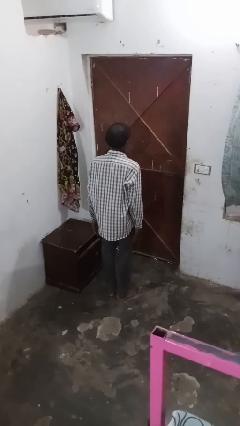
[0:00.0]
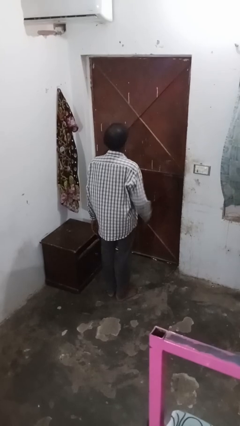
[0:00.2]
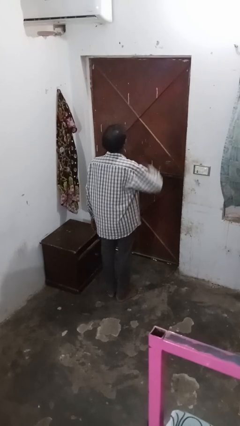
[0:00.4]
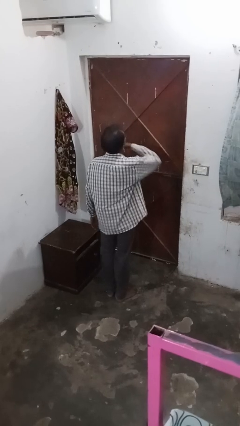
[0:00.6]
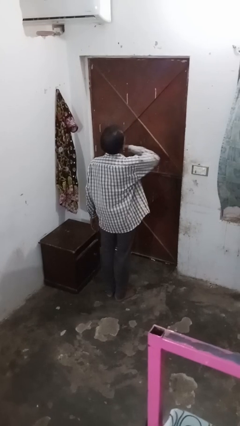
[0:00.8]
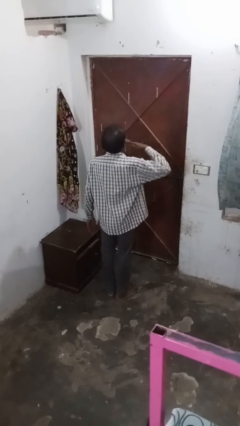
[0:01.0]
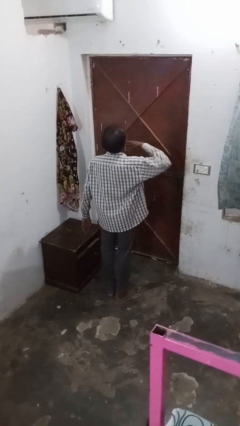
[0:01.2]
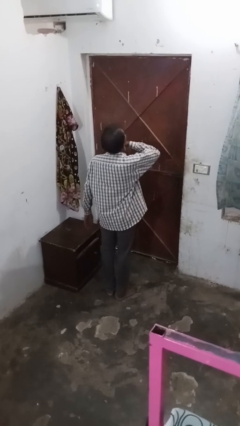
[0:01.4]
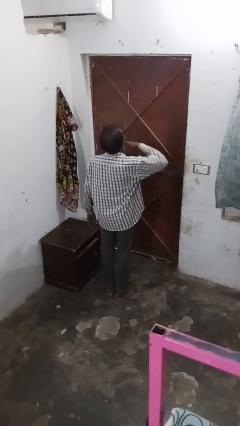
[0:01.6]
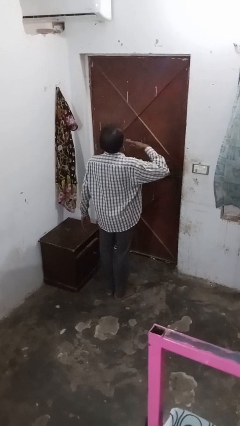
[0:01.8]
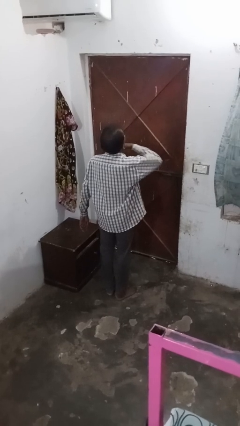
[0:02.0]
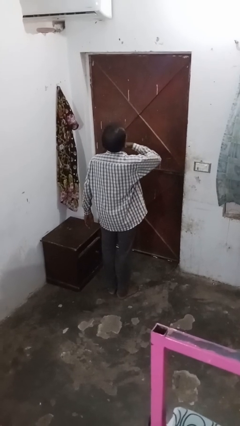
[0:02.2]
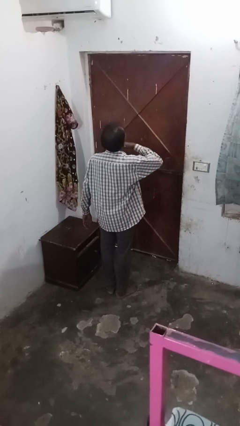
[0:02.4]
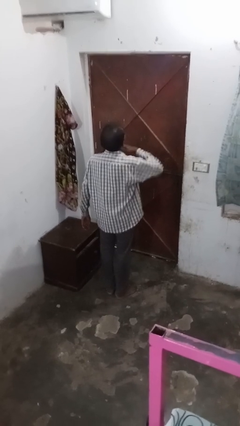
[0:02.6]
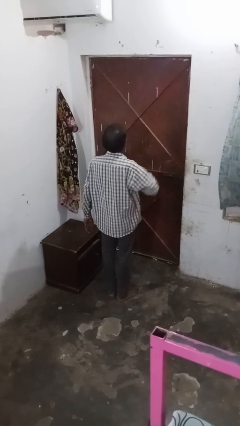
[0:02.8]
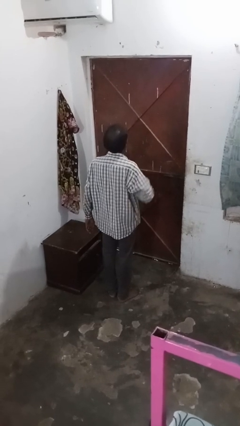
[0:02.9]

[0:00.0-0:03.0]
person gestures cut

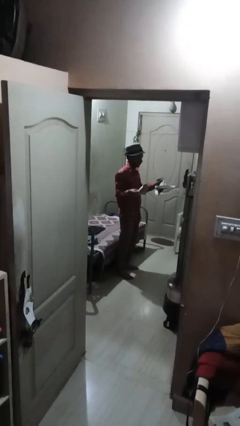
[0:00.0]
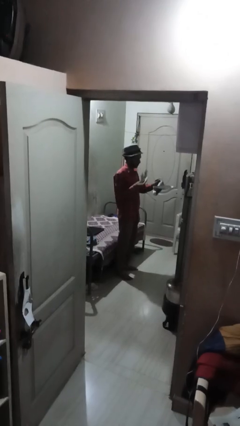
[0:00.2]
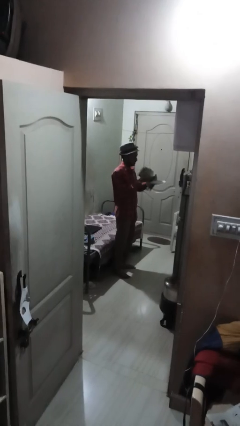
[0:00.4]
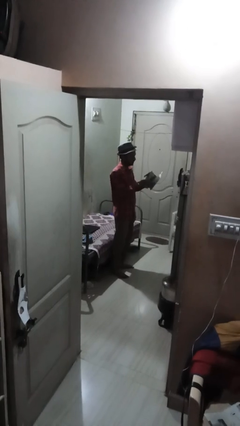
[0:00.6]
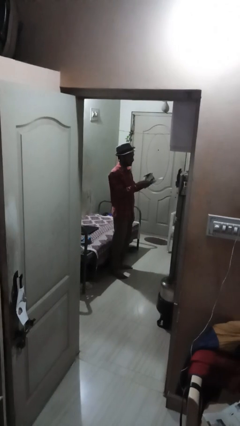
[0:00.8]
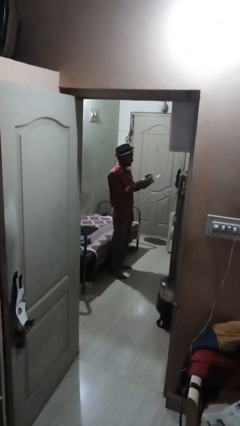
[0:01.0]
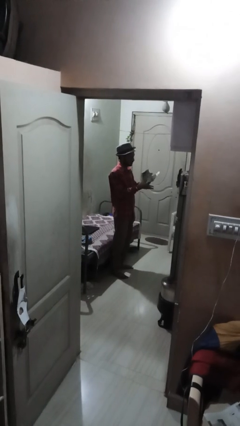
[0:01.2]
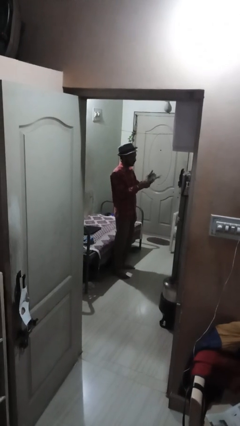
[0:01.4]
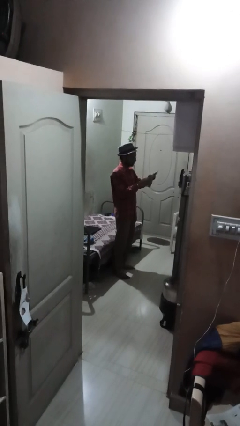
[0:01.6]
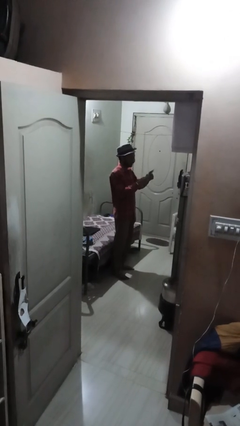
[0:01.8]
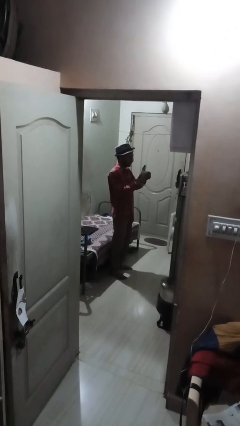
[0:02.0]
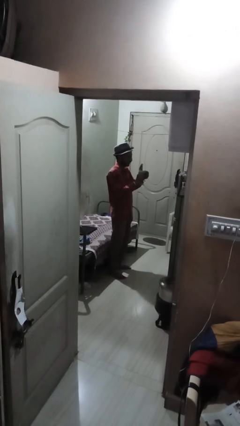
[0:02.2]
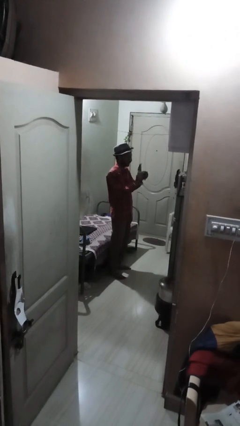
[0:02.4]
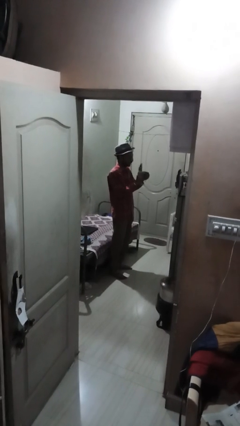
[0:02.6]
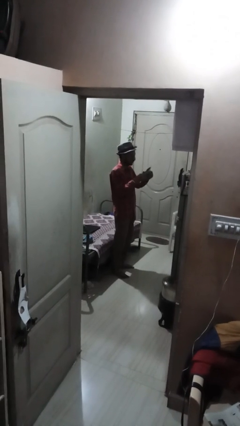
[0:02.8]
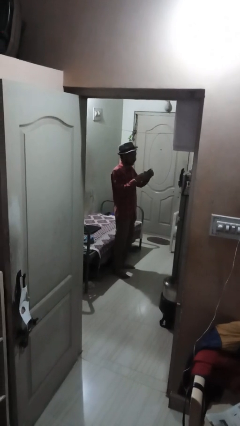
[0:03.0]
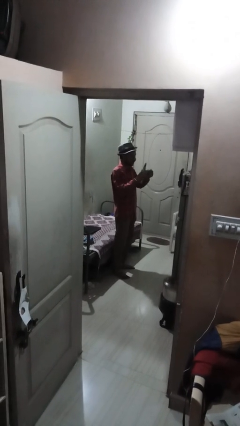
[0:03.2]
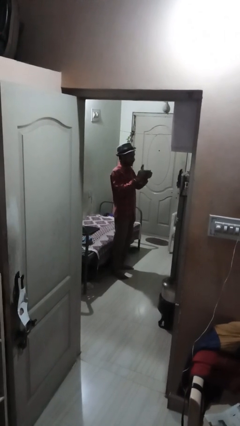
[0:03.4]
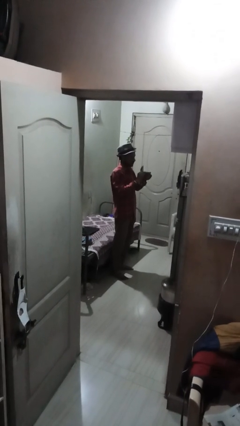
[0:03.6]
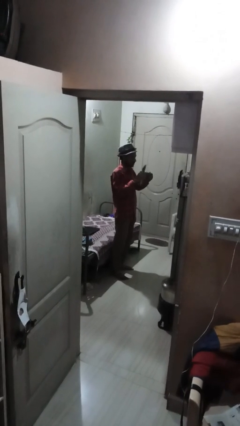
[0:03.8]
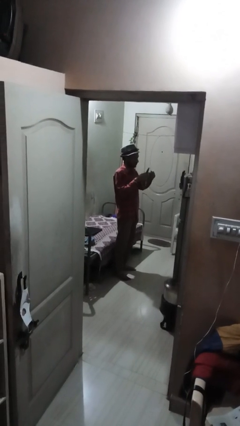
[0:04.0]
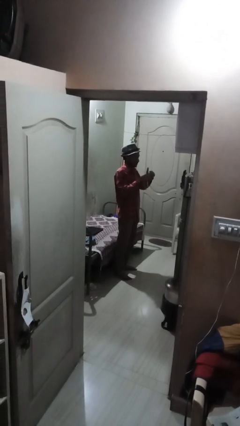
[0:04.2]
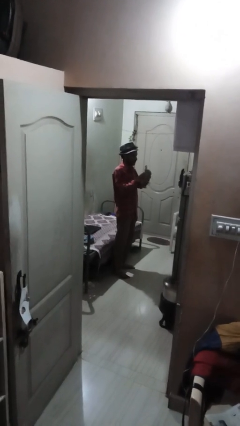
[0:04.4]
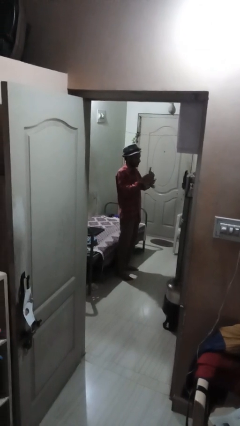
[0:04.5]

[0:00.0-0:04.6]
person tears paper

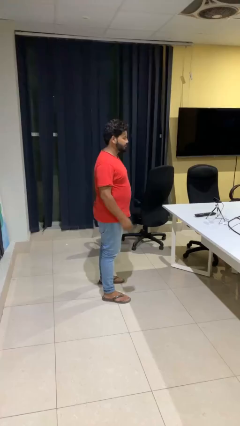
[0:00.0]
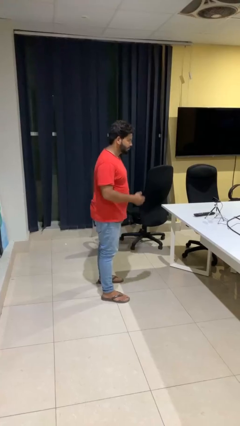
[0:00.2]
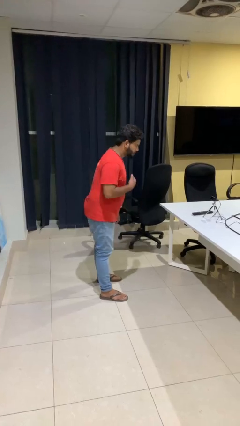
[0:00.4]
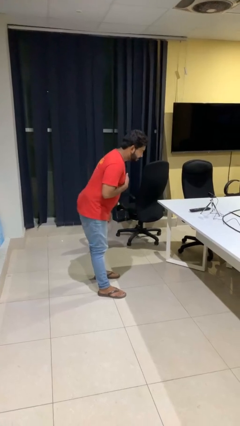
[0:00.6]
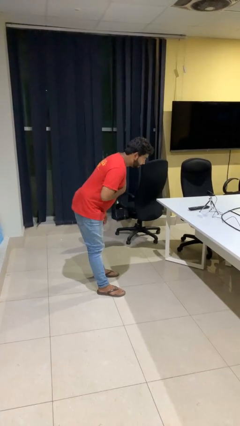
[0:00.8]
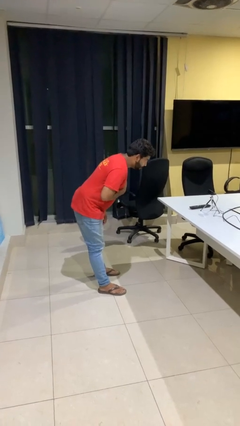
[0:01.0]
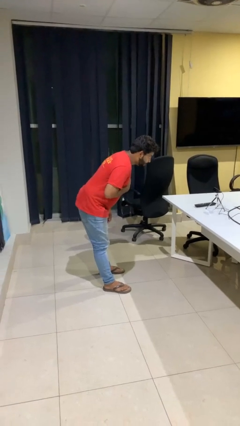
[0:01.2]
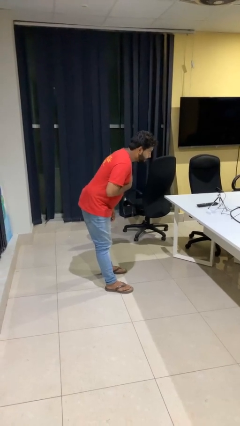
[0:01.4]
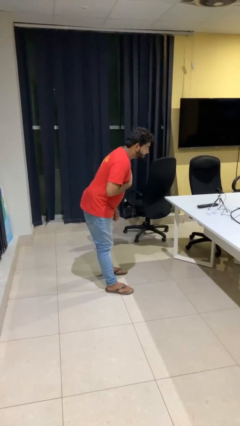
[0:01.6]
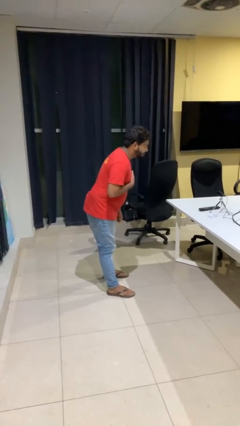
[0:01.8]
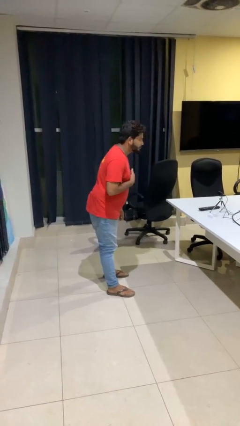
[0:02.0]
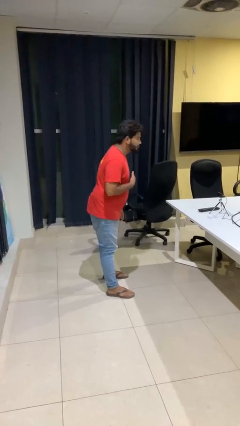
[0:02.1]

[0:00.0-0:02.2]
person bows

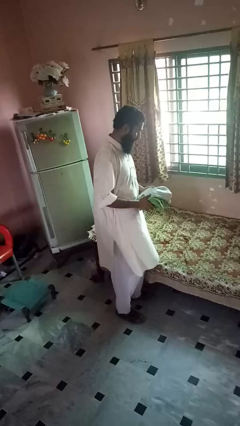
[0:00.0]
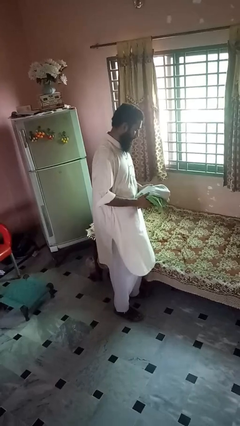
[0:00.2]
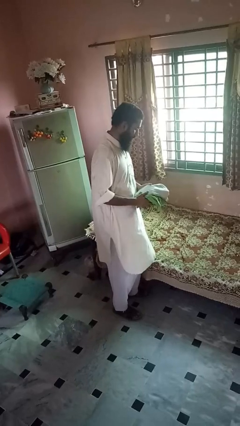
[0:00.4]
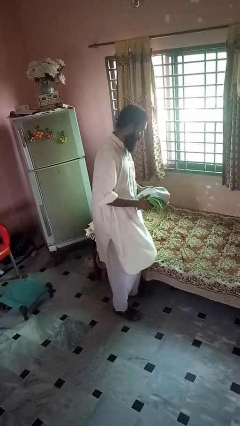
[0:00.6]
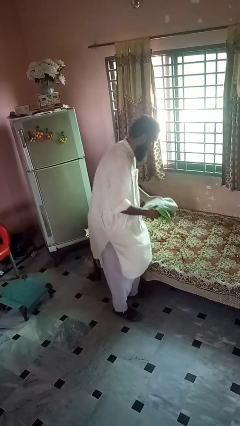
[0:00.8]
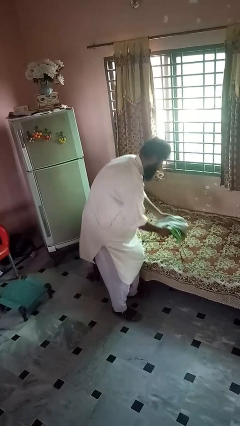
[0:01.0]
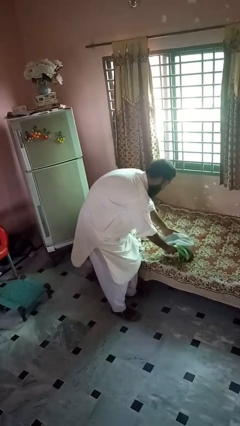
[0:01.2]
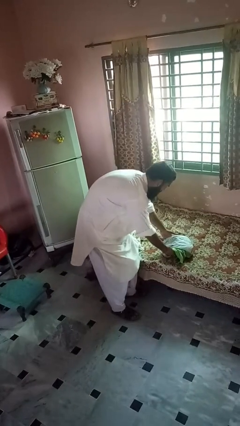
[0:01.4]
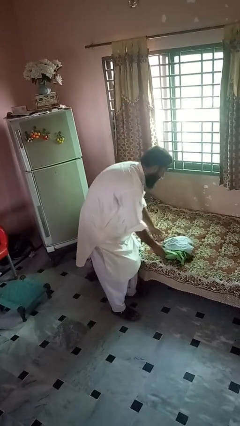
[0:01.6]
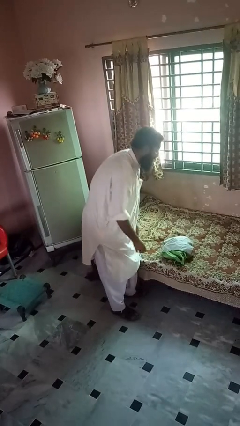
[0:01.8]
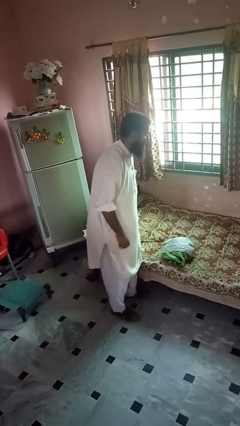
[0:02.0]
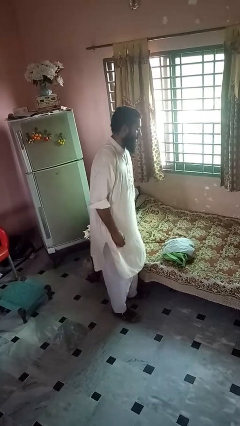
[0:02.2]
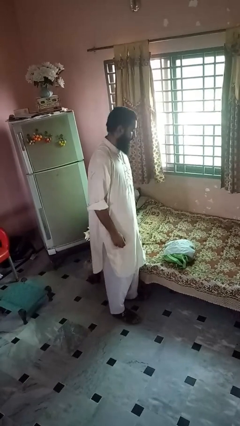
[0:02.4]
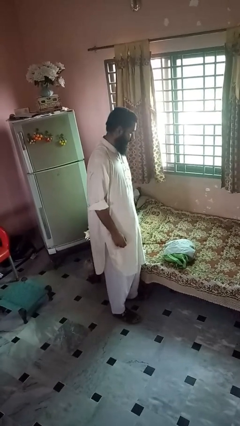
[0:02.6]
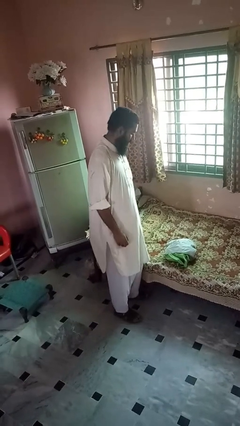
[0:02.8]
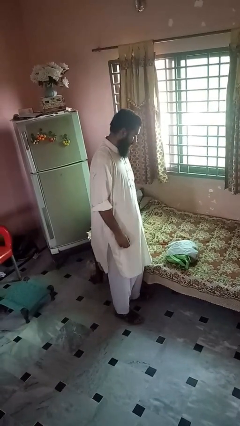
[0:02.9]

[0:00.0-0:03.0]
person puts down object on bed

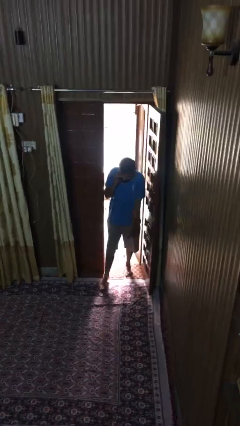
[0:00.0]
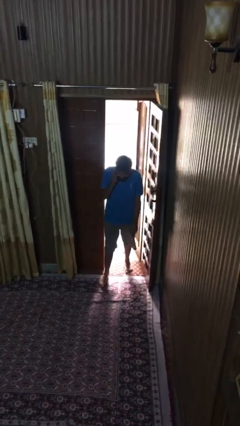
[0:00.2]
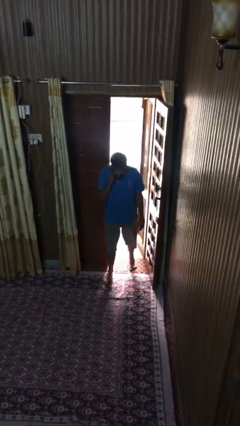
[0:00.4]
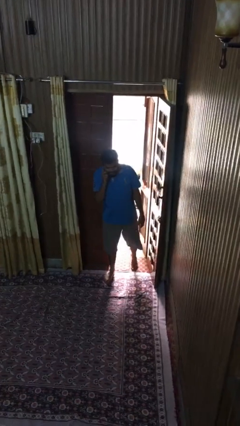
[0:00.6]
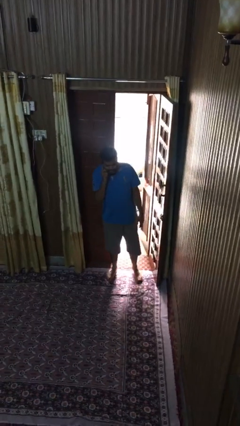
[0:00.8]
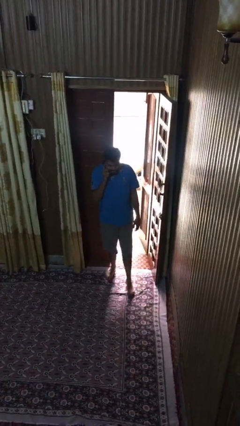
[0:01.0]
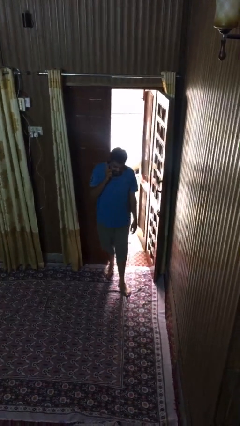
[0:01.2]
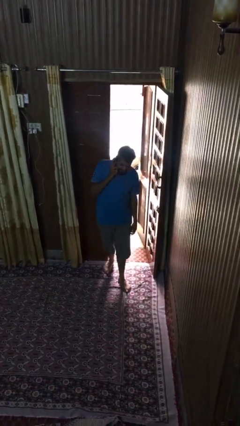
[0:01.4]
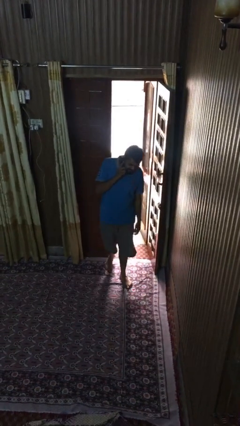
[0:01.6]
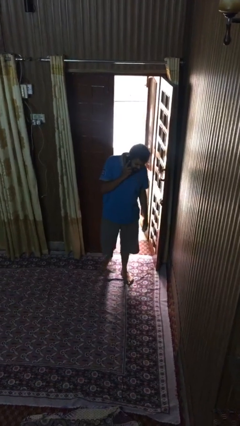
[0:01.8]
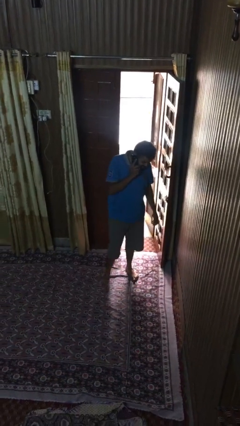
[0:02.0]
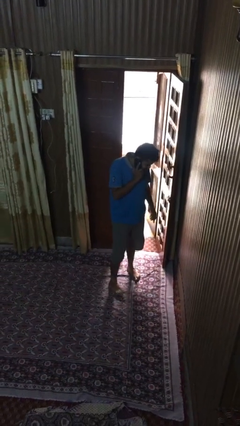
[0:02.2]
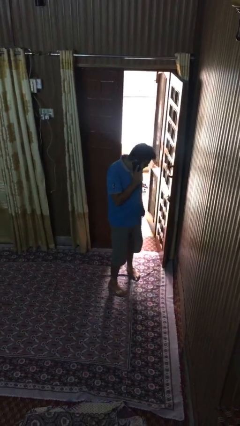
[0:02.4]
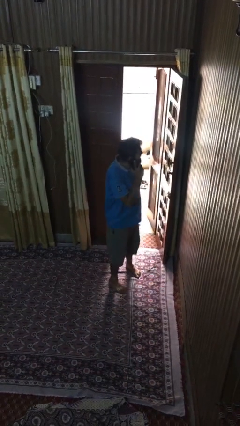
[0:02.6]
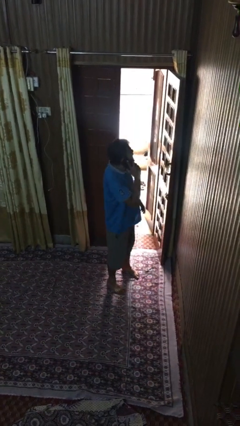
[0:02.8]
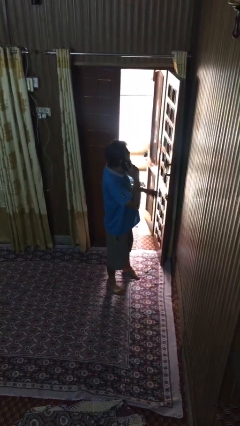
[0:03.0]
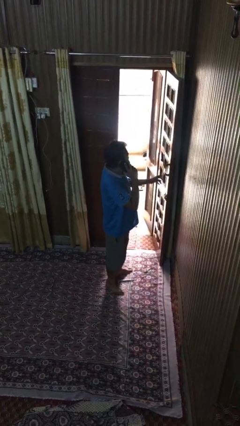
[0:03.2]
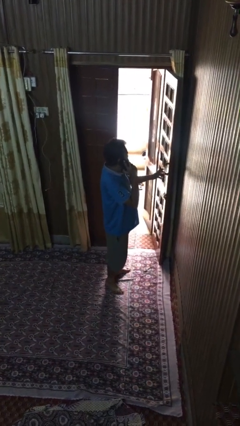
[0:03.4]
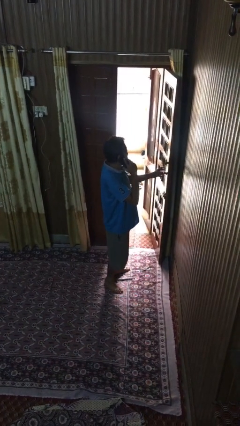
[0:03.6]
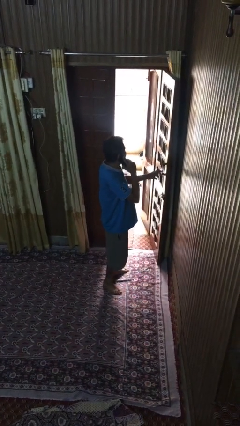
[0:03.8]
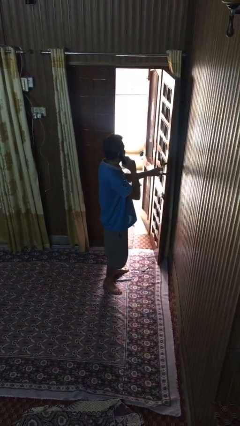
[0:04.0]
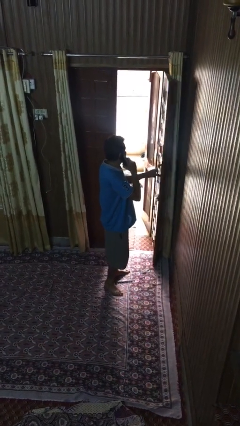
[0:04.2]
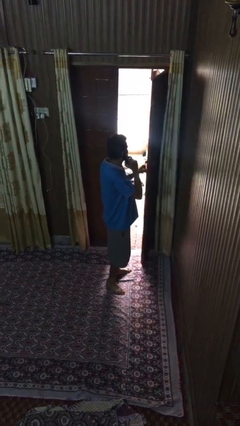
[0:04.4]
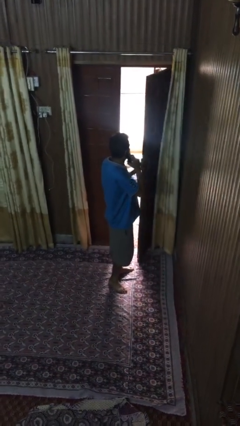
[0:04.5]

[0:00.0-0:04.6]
person enters scene through structure

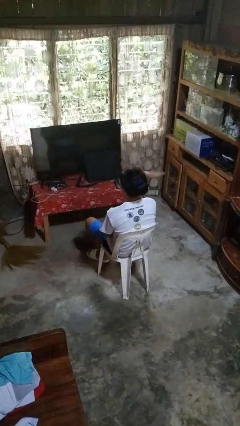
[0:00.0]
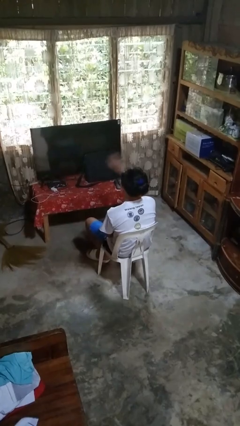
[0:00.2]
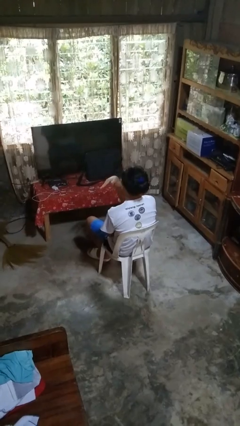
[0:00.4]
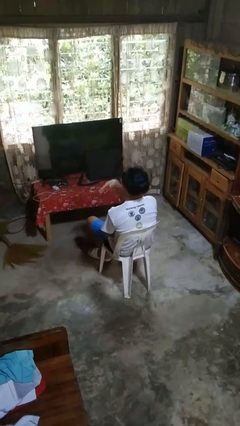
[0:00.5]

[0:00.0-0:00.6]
person gestures swipe left
